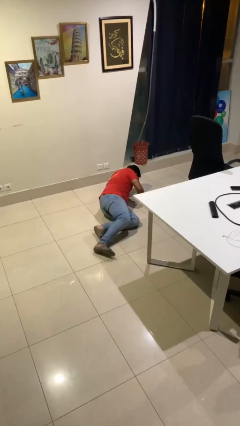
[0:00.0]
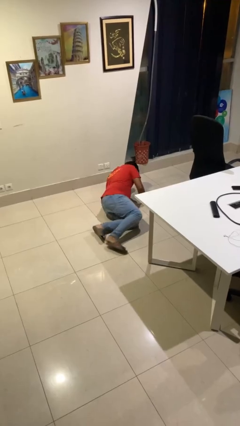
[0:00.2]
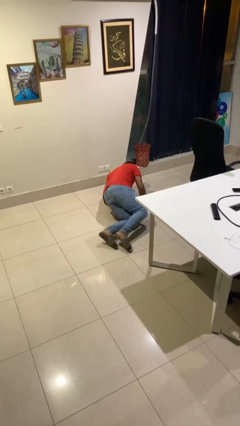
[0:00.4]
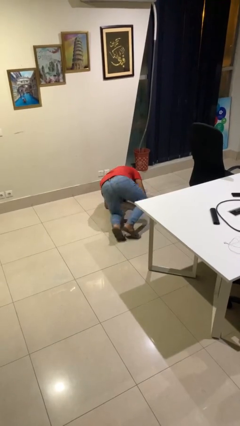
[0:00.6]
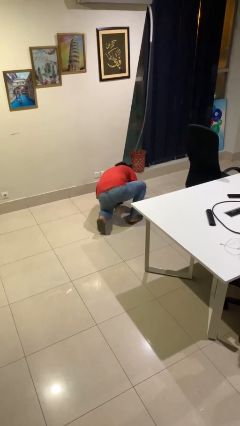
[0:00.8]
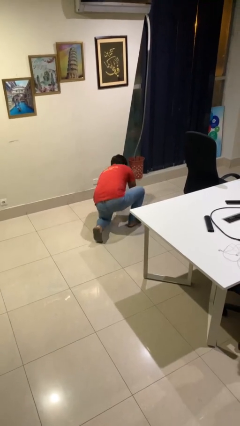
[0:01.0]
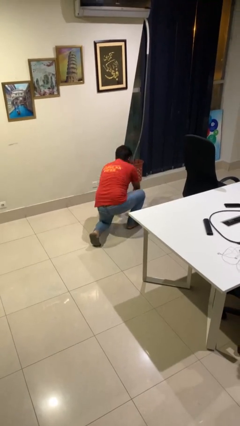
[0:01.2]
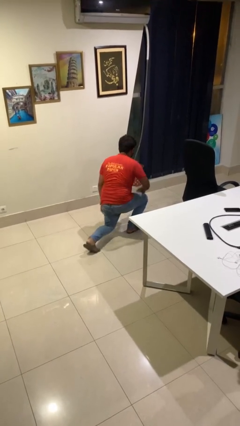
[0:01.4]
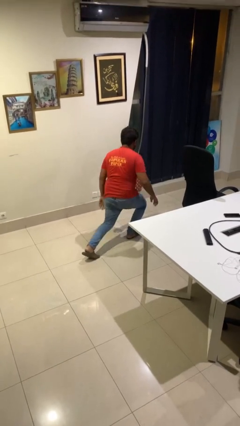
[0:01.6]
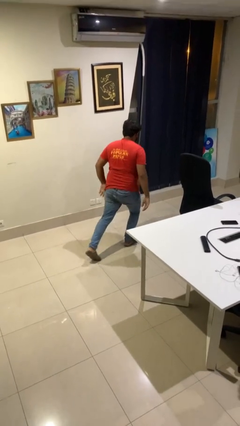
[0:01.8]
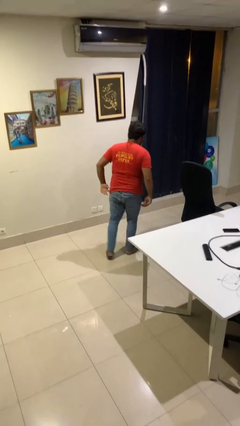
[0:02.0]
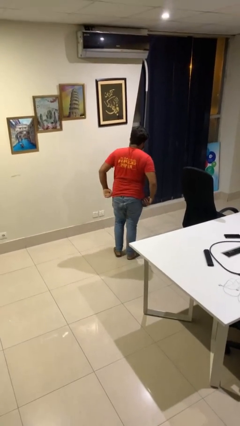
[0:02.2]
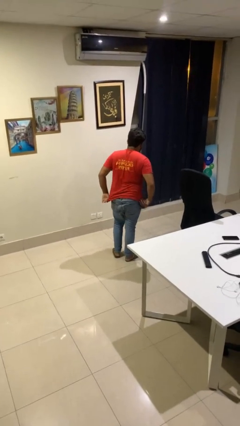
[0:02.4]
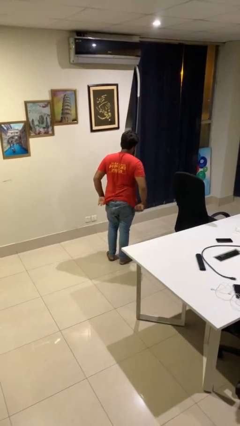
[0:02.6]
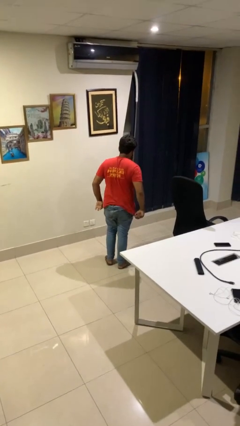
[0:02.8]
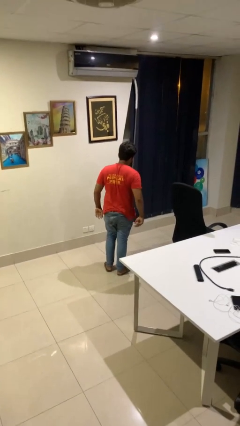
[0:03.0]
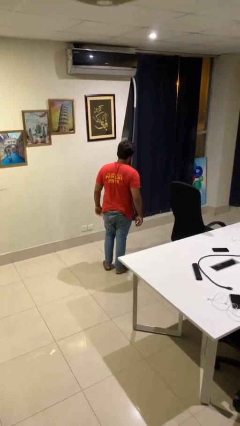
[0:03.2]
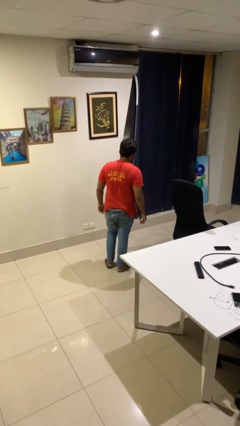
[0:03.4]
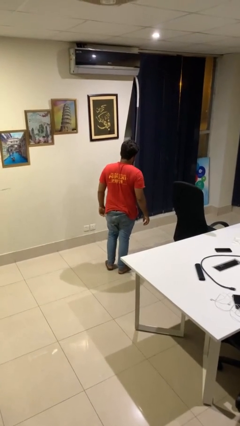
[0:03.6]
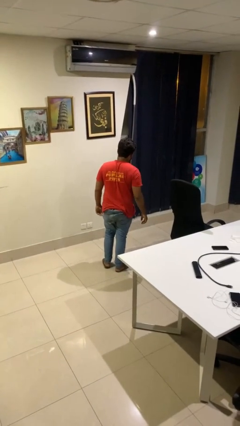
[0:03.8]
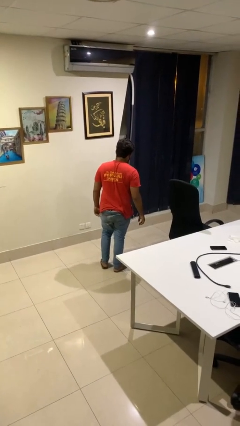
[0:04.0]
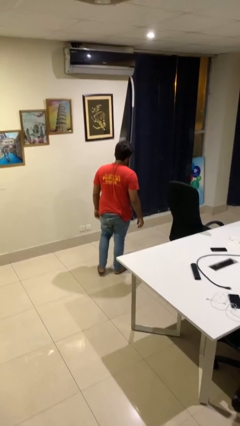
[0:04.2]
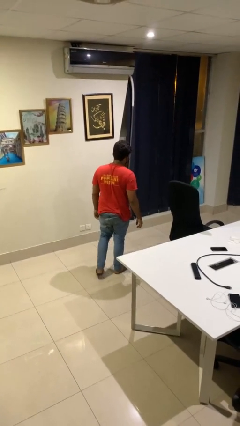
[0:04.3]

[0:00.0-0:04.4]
person stands up from floor

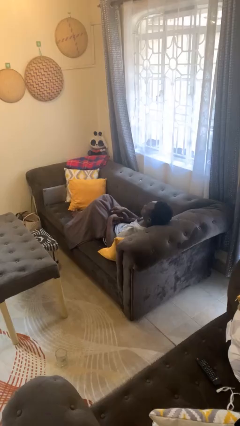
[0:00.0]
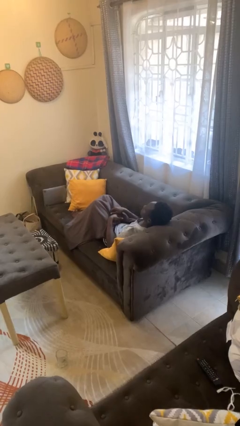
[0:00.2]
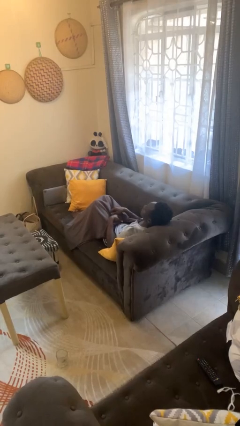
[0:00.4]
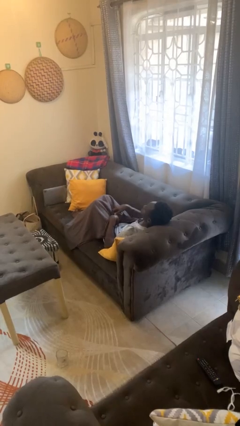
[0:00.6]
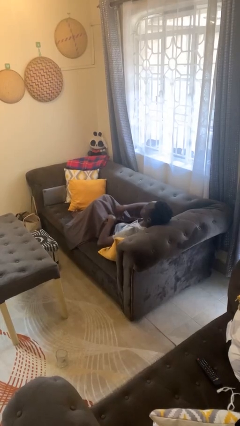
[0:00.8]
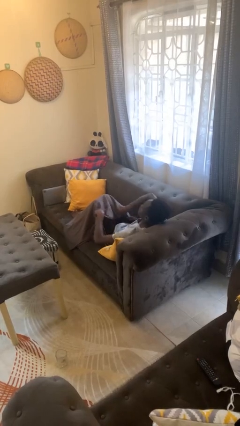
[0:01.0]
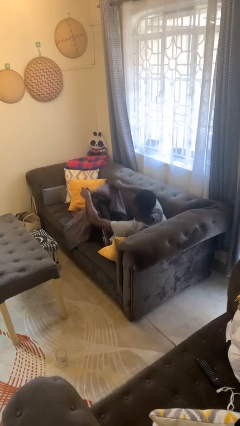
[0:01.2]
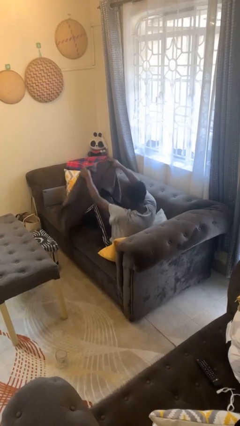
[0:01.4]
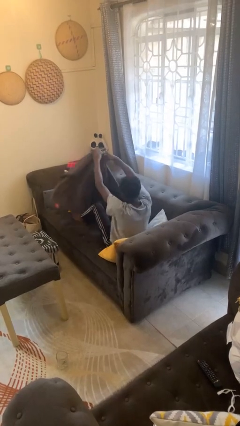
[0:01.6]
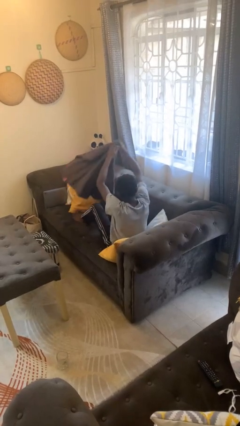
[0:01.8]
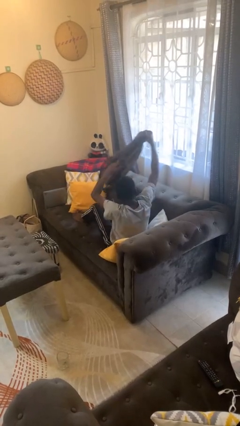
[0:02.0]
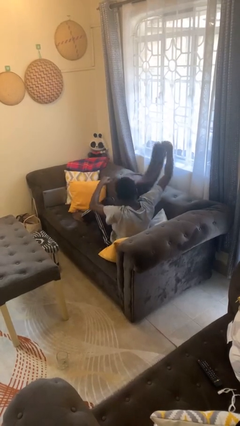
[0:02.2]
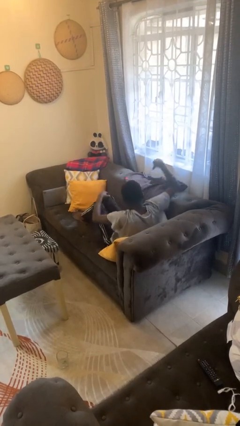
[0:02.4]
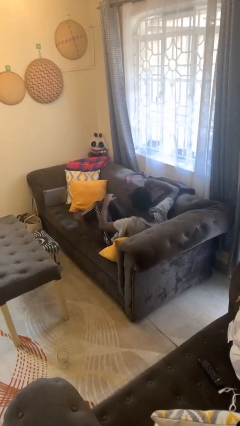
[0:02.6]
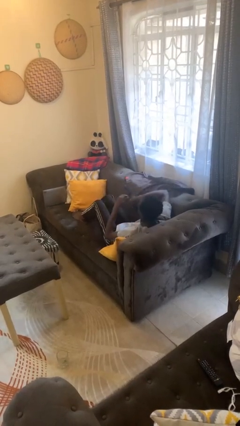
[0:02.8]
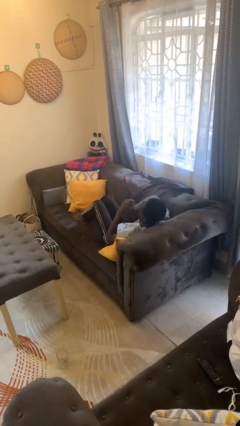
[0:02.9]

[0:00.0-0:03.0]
person uncovers with blanket

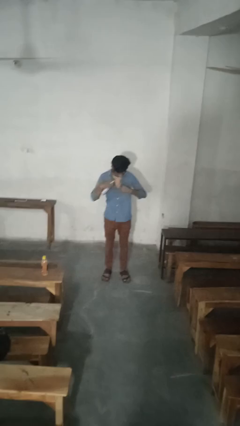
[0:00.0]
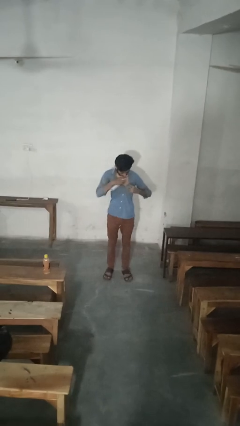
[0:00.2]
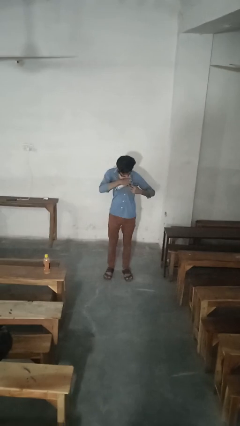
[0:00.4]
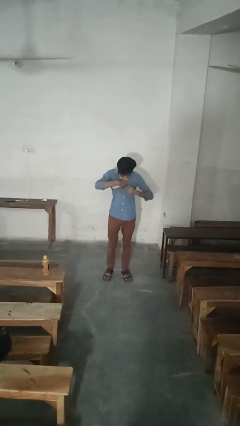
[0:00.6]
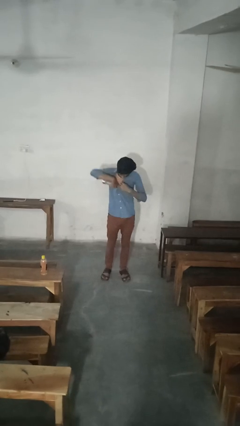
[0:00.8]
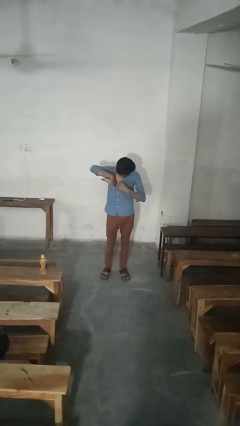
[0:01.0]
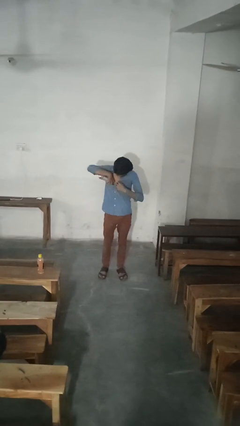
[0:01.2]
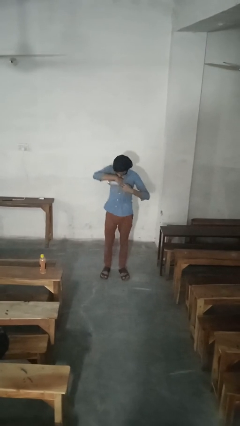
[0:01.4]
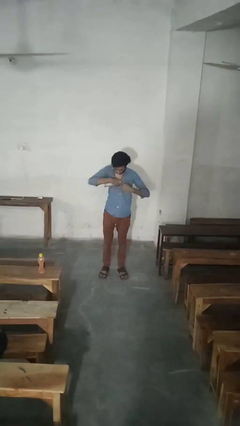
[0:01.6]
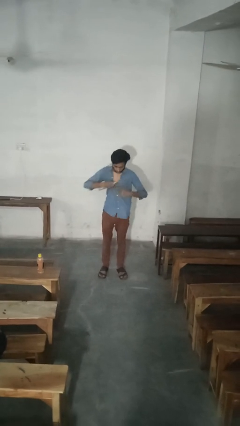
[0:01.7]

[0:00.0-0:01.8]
person applies deodorant

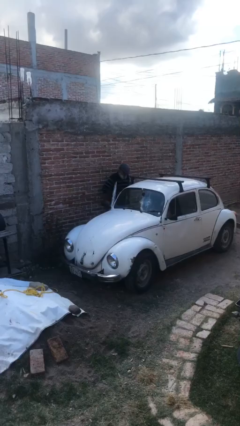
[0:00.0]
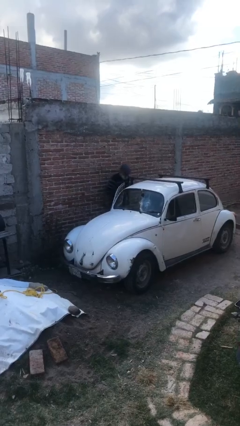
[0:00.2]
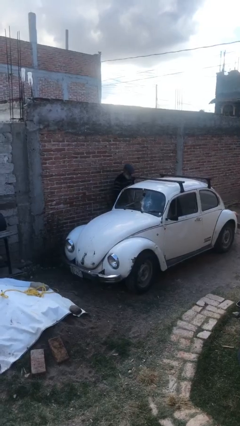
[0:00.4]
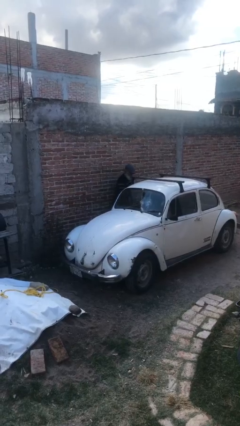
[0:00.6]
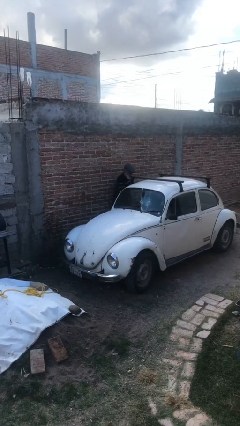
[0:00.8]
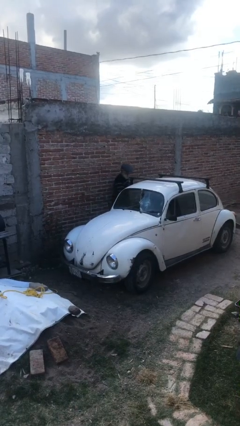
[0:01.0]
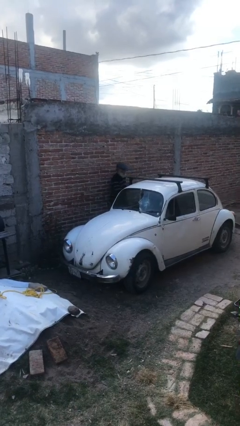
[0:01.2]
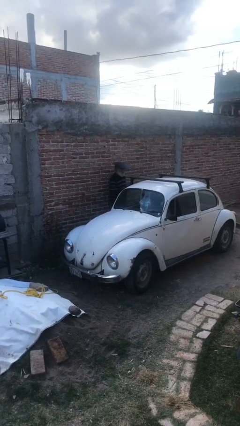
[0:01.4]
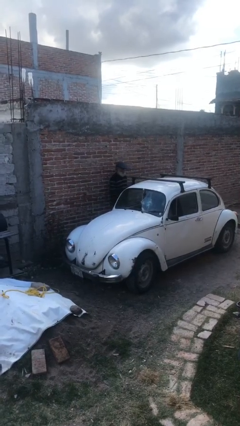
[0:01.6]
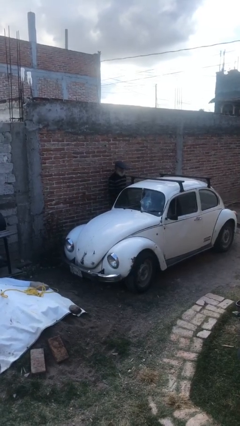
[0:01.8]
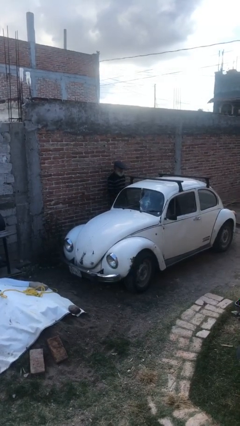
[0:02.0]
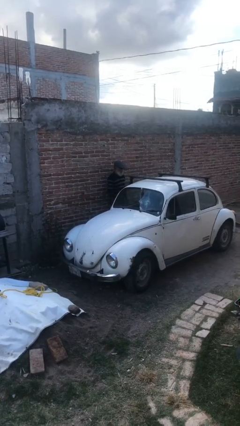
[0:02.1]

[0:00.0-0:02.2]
person closes car door

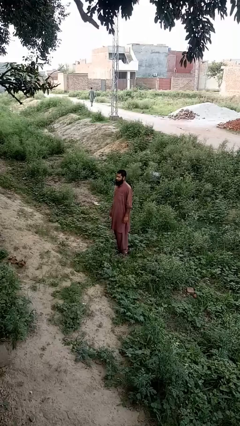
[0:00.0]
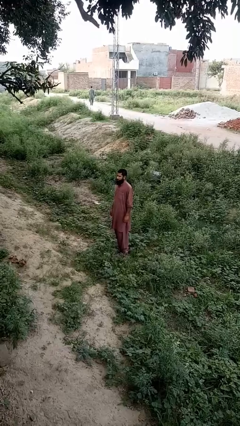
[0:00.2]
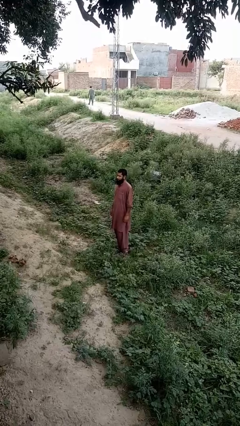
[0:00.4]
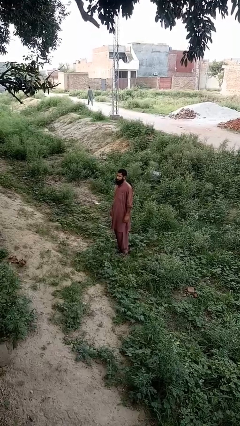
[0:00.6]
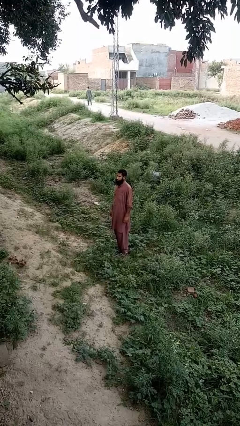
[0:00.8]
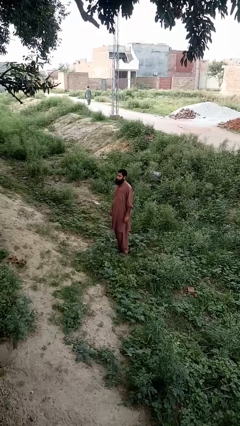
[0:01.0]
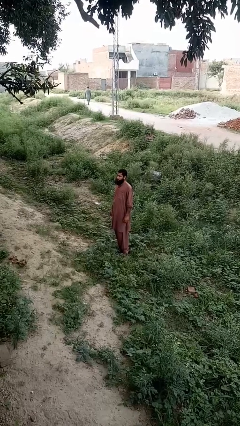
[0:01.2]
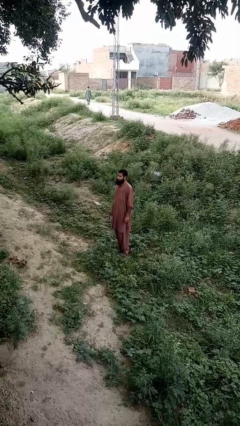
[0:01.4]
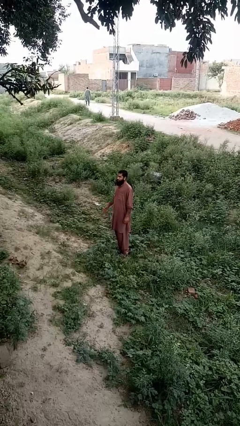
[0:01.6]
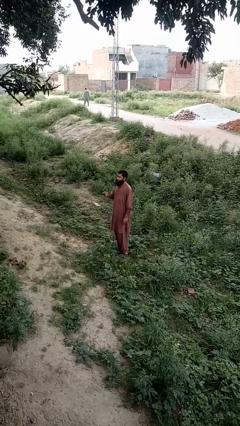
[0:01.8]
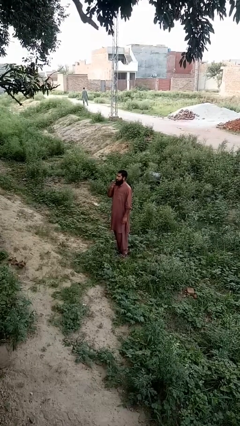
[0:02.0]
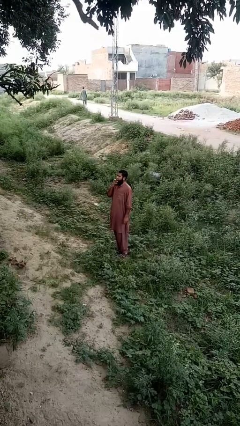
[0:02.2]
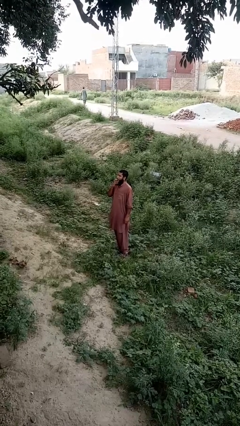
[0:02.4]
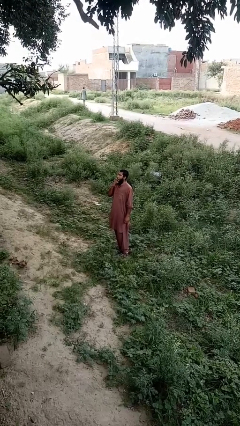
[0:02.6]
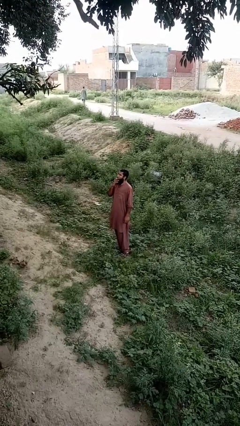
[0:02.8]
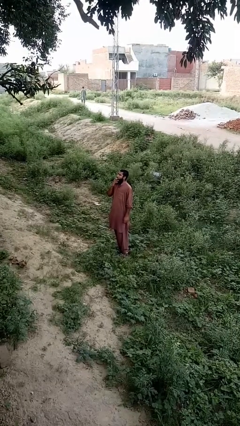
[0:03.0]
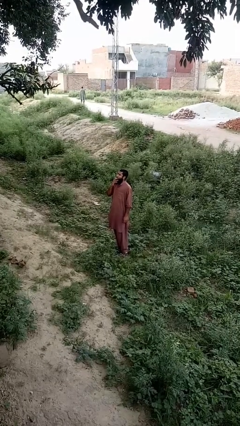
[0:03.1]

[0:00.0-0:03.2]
person vapes

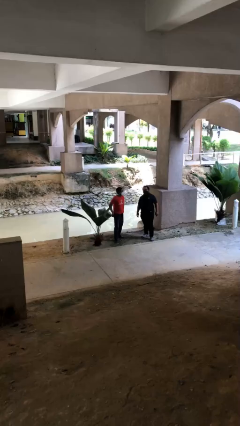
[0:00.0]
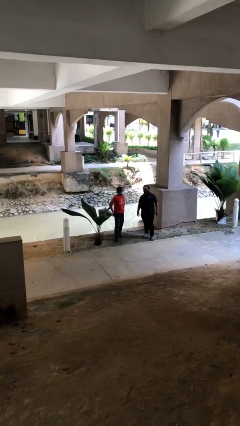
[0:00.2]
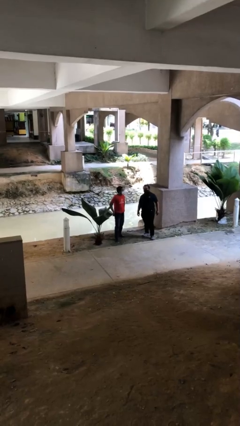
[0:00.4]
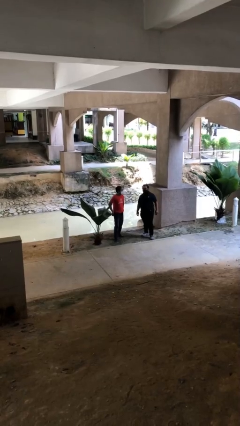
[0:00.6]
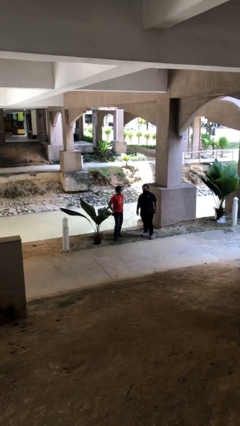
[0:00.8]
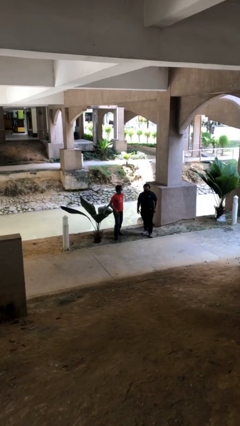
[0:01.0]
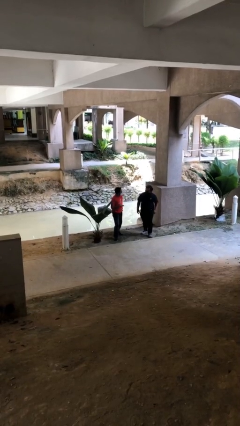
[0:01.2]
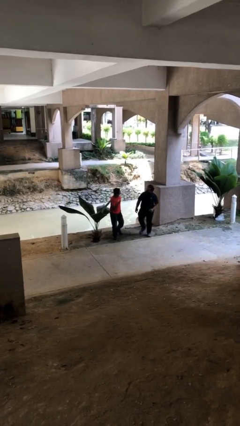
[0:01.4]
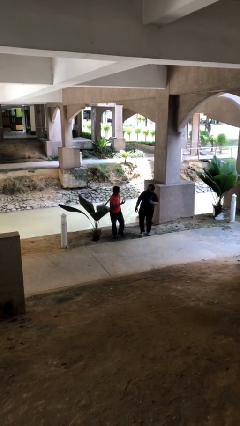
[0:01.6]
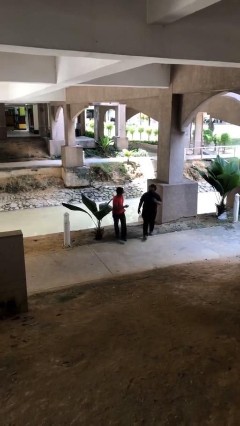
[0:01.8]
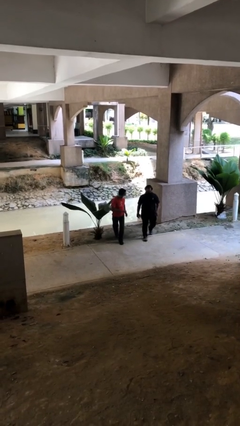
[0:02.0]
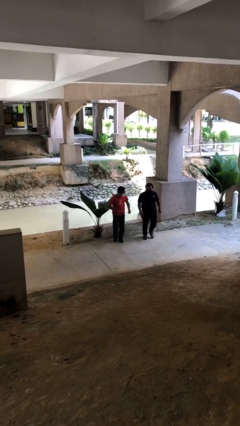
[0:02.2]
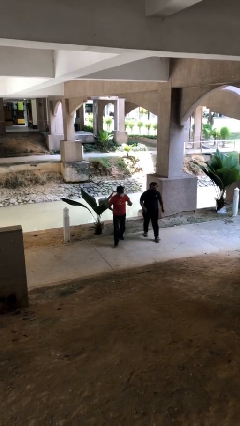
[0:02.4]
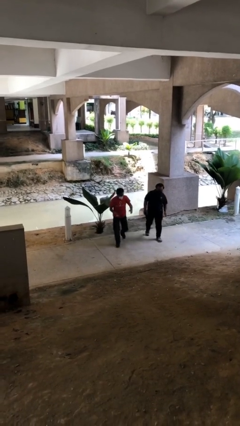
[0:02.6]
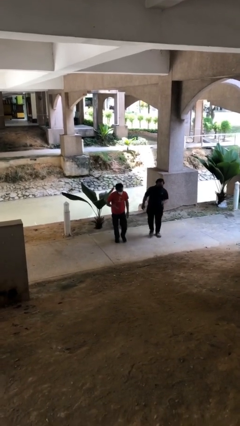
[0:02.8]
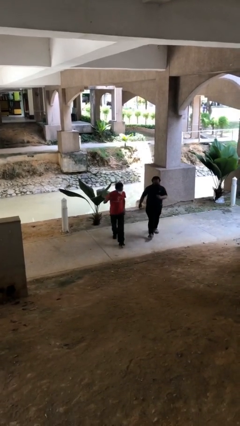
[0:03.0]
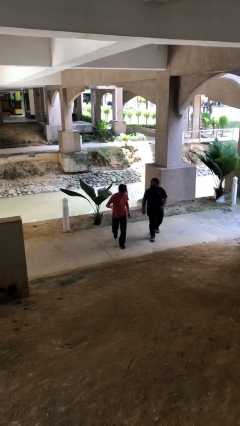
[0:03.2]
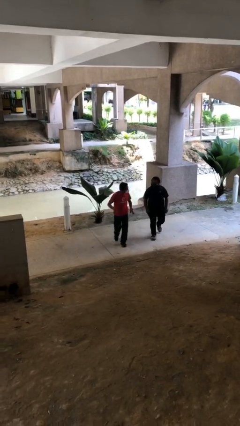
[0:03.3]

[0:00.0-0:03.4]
person talks to person
